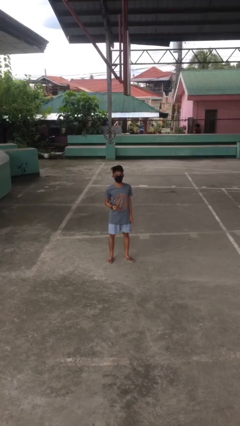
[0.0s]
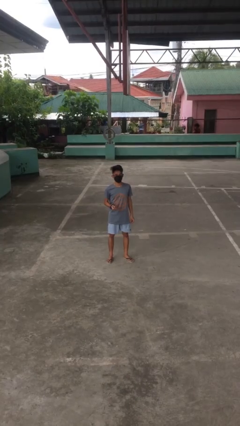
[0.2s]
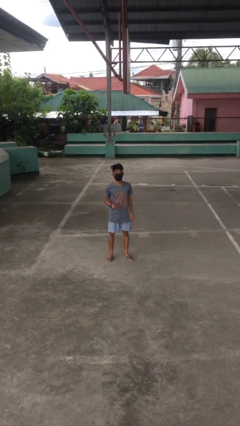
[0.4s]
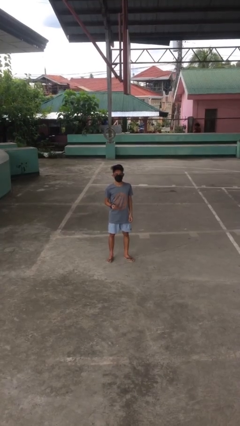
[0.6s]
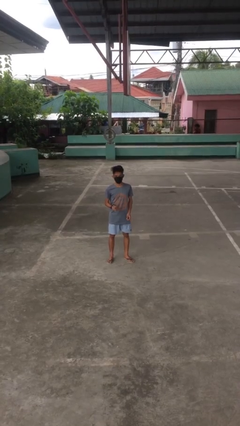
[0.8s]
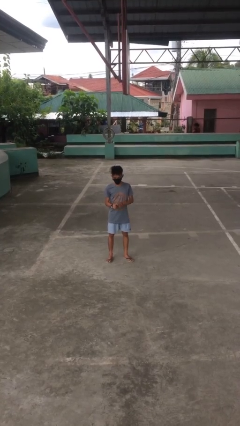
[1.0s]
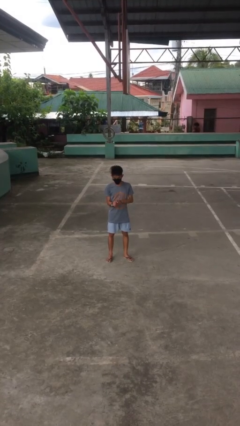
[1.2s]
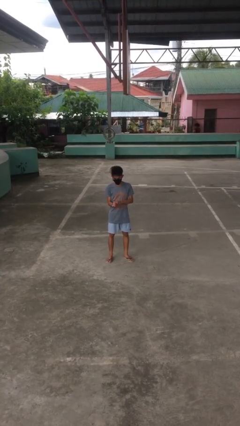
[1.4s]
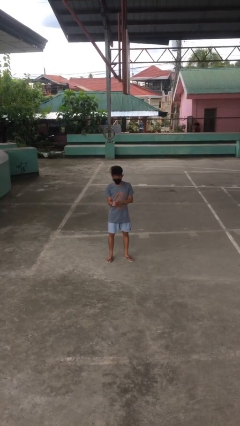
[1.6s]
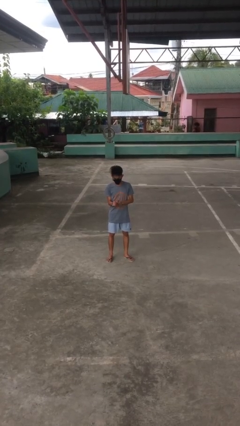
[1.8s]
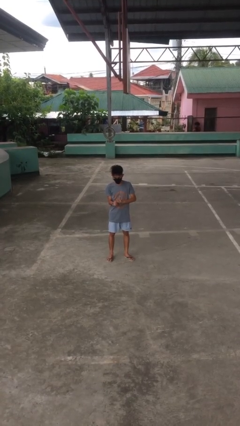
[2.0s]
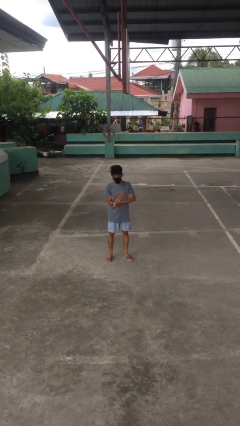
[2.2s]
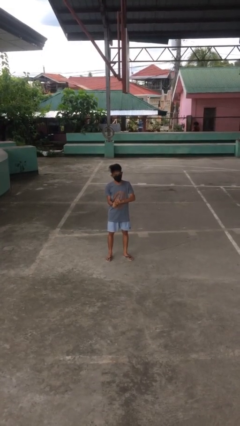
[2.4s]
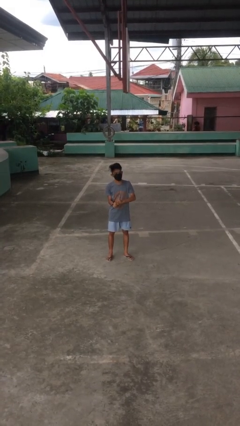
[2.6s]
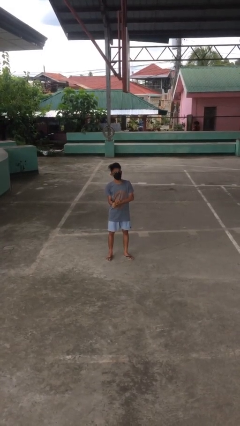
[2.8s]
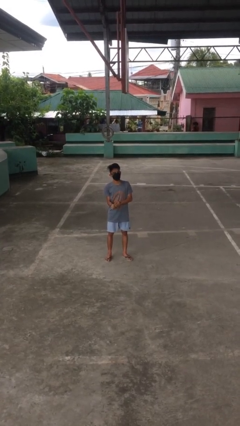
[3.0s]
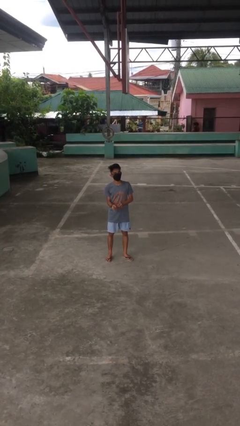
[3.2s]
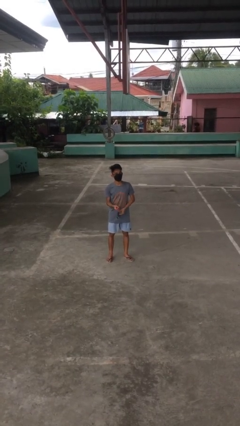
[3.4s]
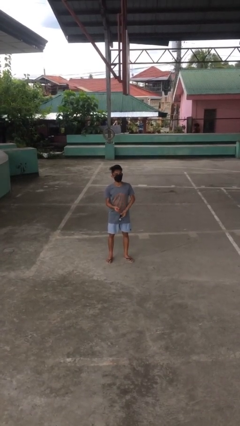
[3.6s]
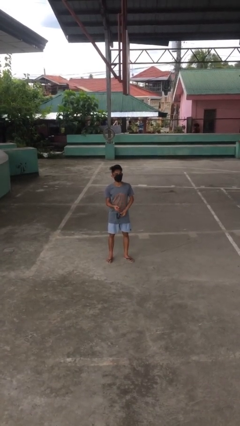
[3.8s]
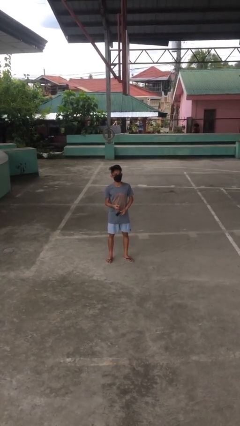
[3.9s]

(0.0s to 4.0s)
person takes off wristwatch

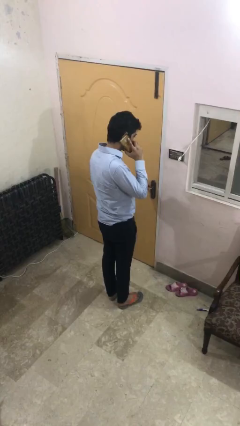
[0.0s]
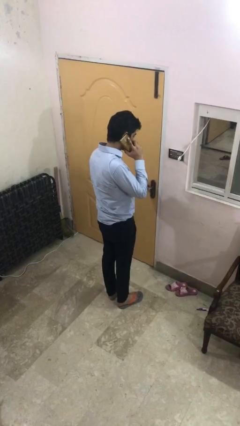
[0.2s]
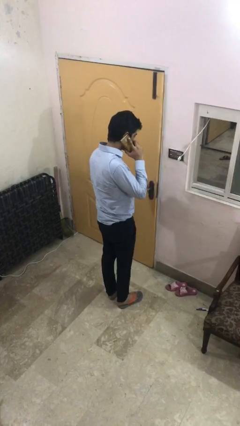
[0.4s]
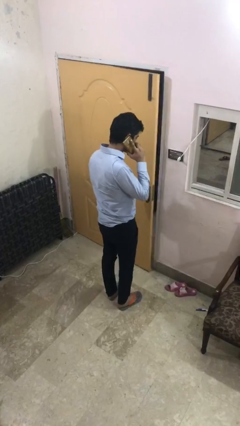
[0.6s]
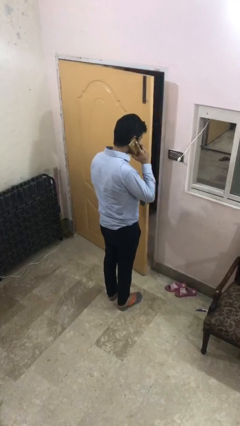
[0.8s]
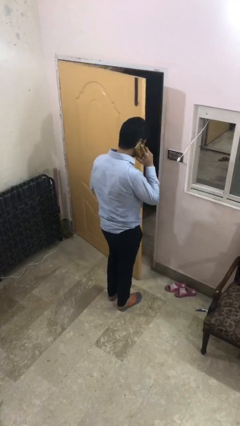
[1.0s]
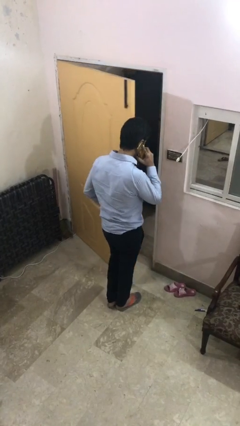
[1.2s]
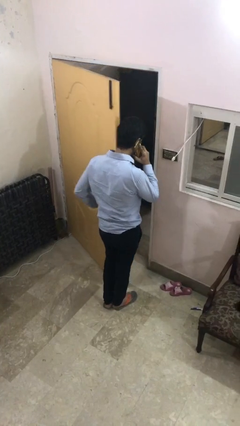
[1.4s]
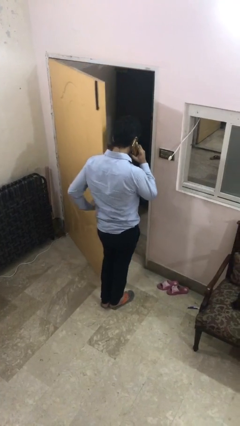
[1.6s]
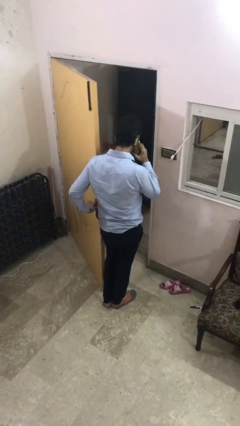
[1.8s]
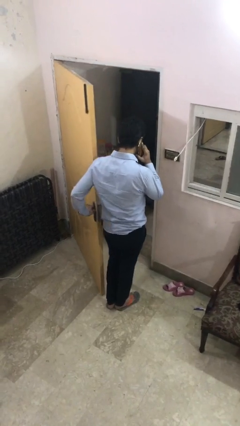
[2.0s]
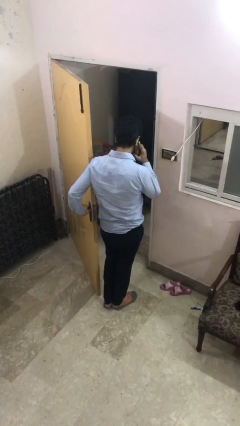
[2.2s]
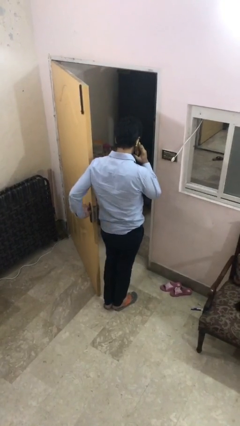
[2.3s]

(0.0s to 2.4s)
person opens facility door

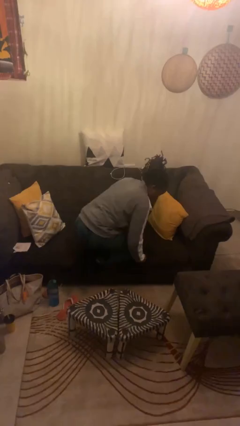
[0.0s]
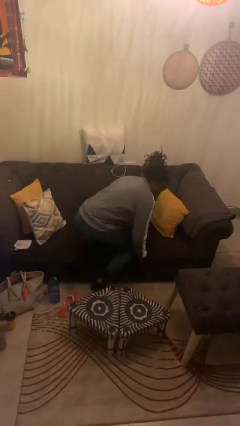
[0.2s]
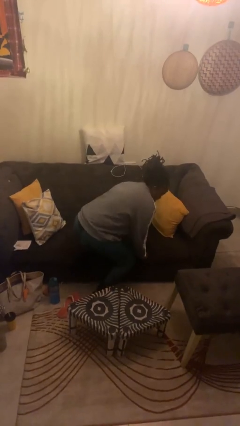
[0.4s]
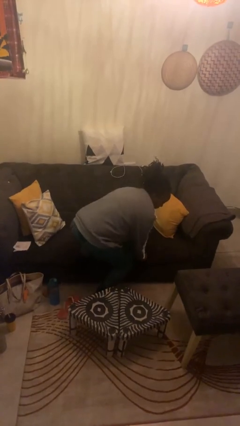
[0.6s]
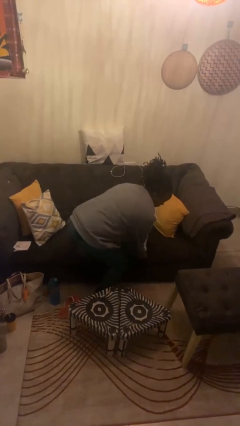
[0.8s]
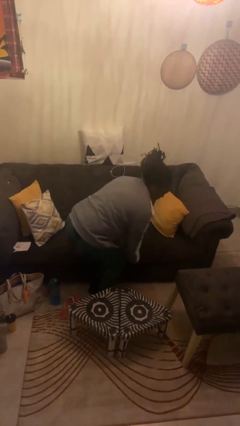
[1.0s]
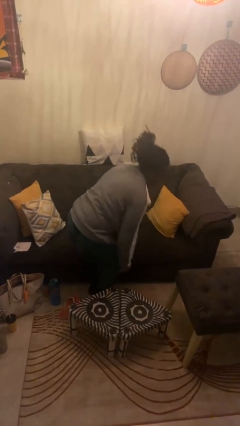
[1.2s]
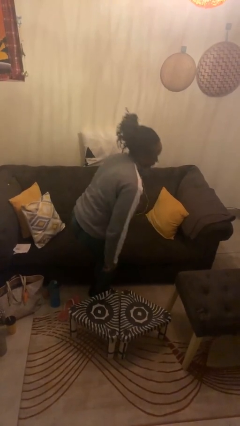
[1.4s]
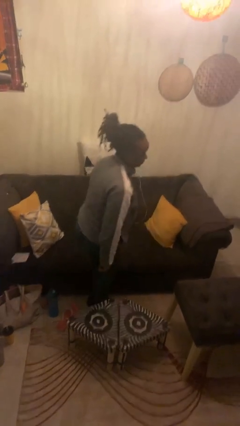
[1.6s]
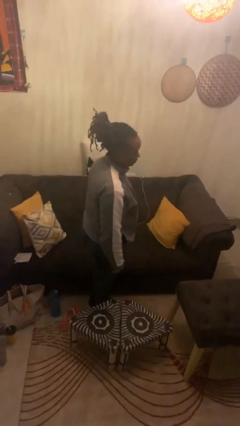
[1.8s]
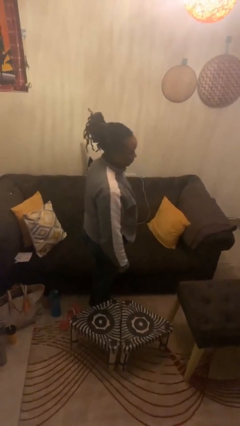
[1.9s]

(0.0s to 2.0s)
person climbs off couch

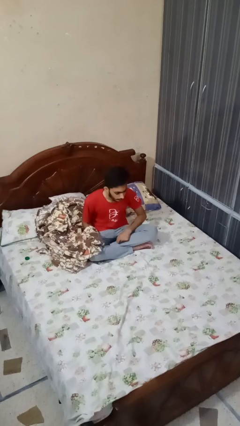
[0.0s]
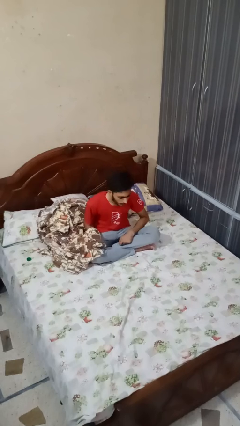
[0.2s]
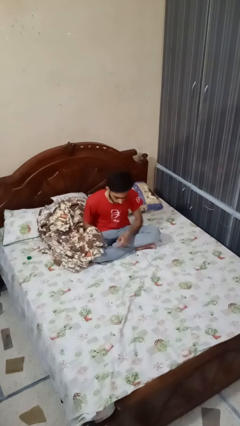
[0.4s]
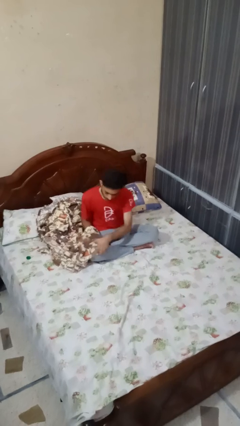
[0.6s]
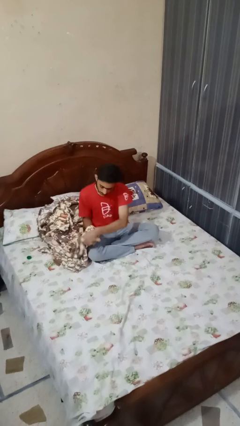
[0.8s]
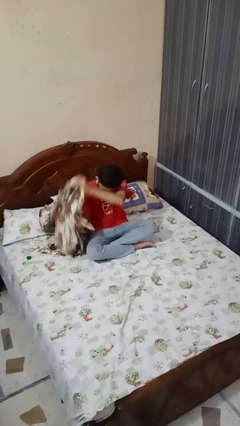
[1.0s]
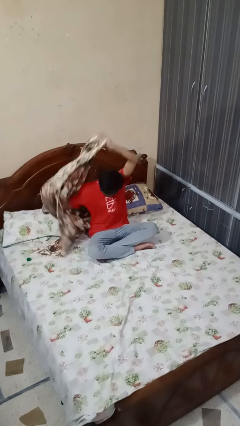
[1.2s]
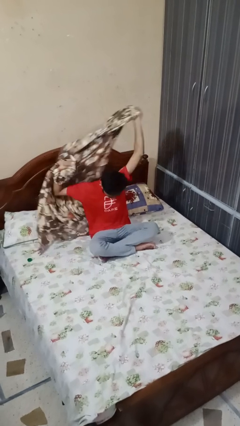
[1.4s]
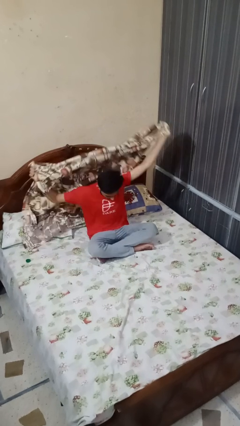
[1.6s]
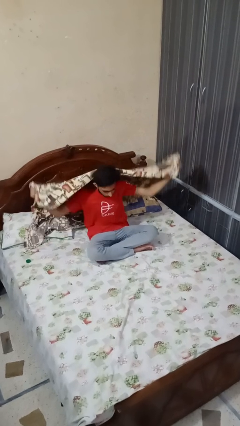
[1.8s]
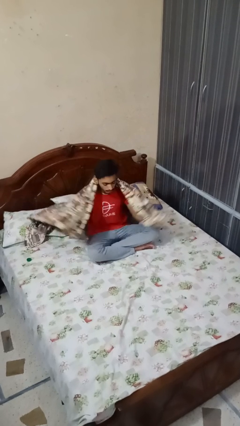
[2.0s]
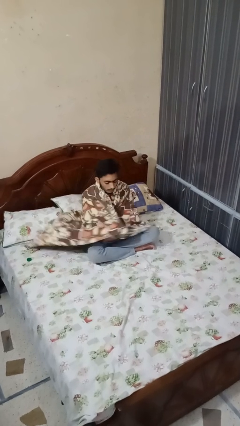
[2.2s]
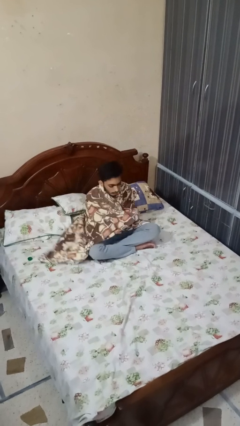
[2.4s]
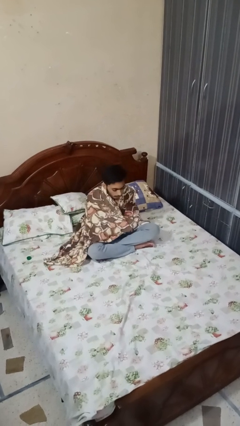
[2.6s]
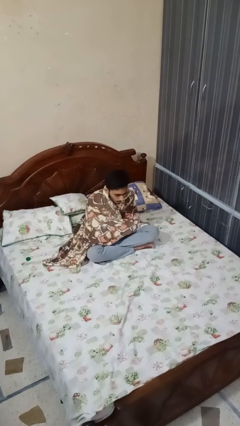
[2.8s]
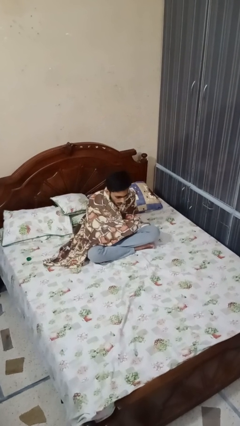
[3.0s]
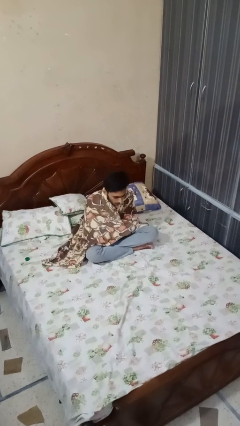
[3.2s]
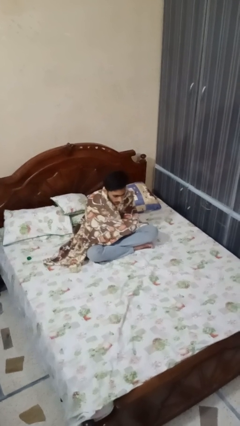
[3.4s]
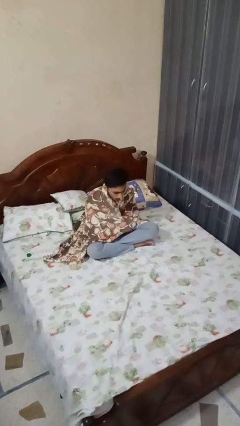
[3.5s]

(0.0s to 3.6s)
person covers with blanket

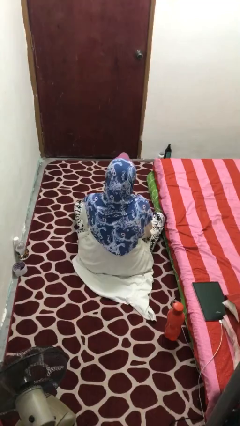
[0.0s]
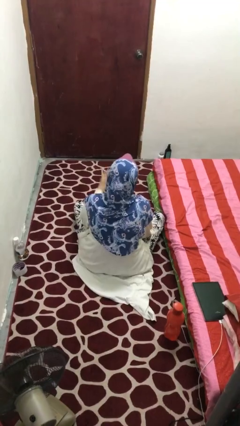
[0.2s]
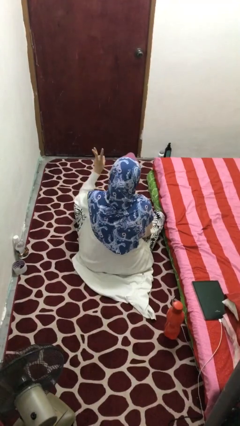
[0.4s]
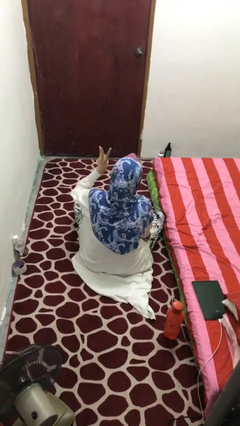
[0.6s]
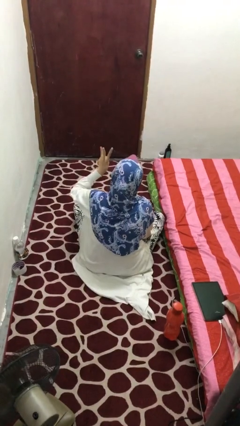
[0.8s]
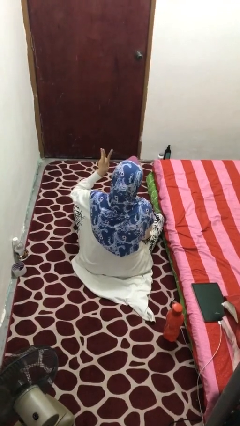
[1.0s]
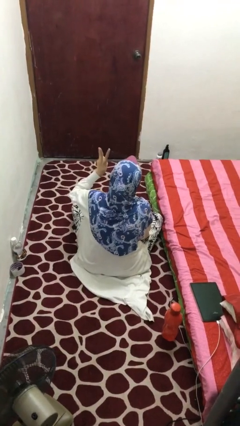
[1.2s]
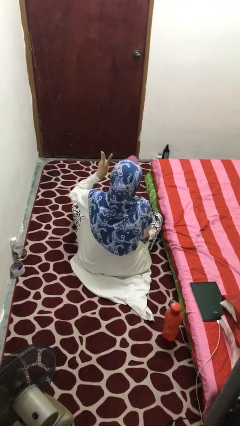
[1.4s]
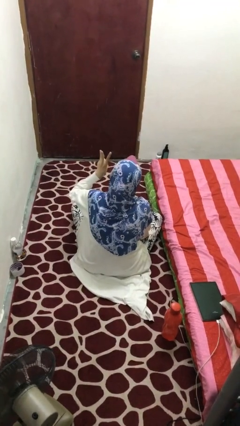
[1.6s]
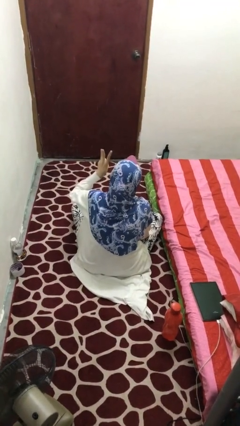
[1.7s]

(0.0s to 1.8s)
person gestures number three

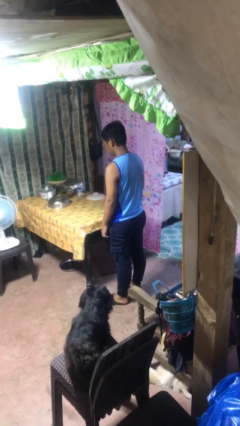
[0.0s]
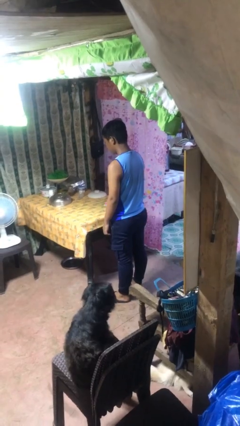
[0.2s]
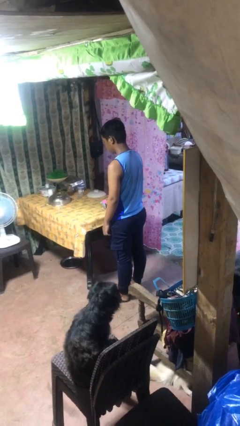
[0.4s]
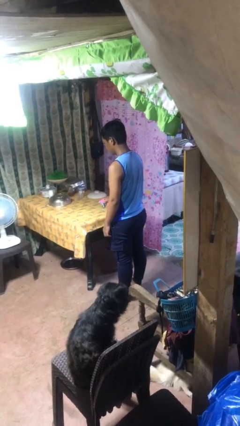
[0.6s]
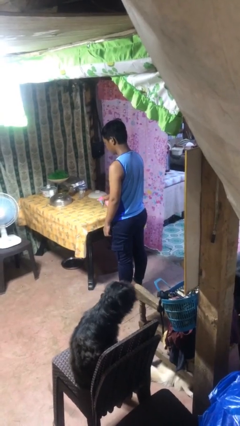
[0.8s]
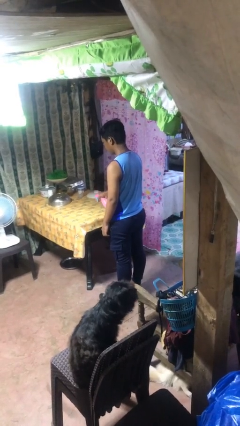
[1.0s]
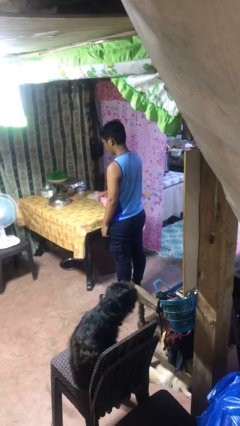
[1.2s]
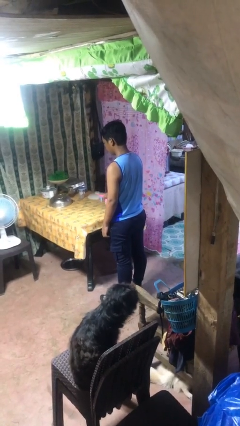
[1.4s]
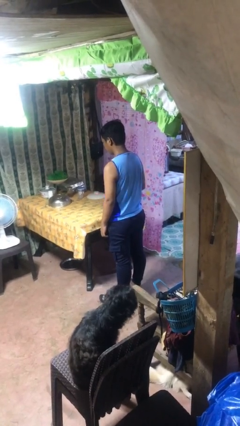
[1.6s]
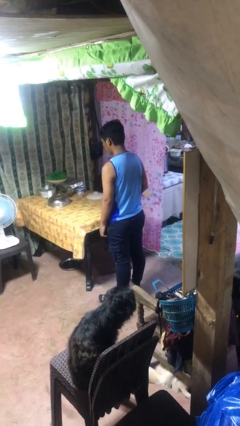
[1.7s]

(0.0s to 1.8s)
person sprays from bottle

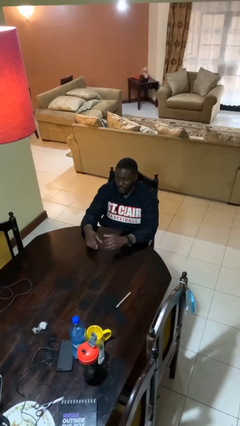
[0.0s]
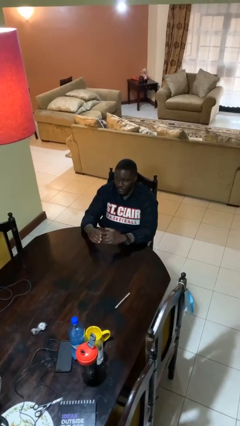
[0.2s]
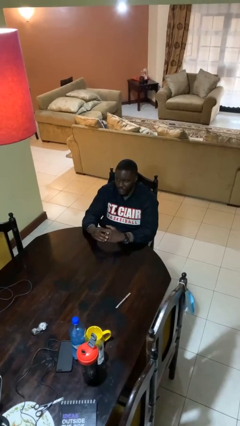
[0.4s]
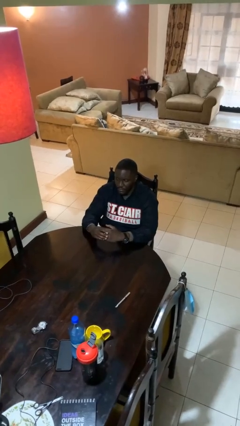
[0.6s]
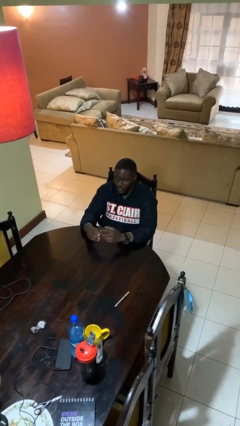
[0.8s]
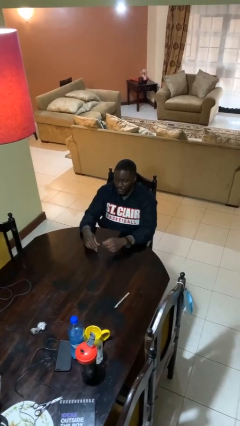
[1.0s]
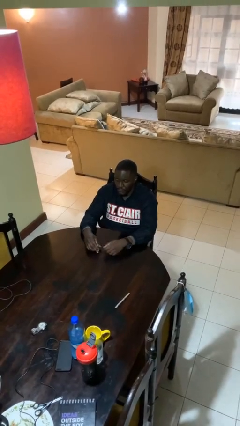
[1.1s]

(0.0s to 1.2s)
person takes off ring
